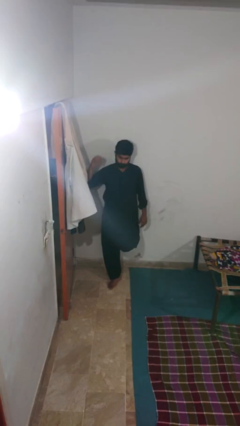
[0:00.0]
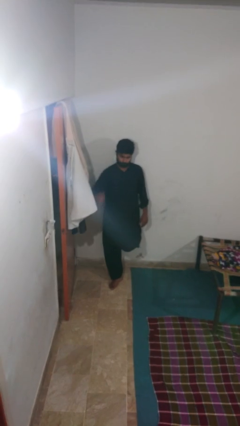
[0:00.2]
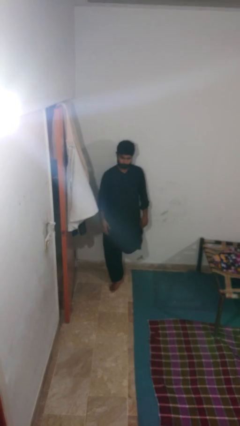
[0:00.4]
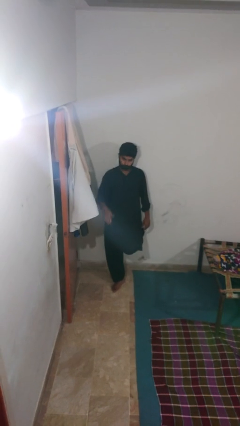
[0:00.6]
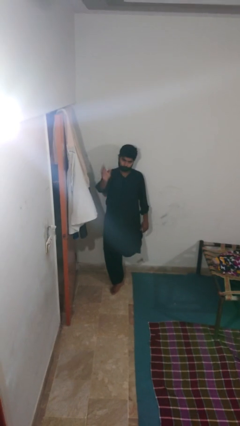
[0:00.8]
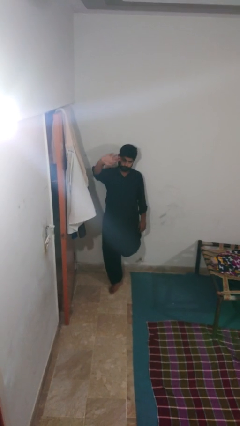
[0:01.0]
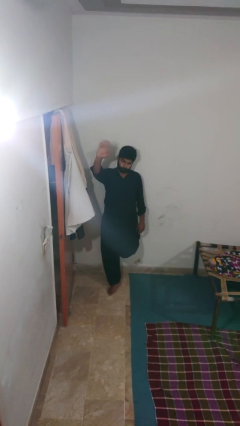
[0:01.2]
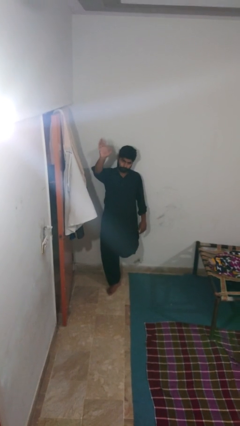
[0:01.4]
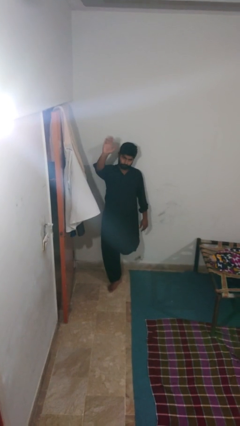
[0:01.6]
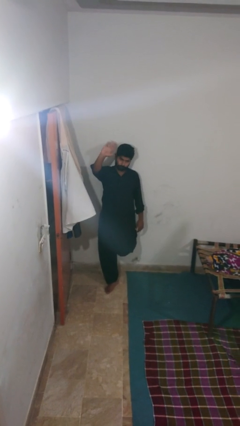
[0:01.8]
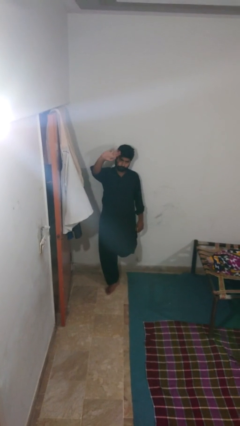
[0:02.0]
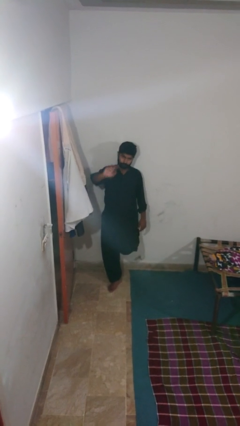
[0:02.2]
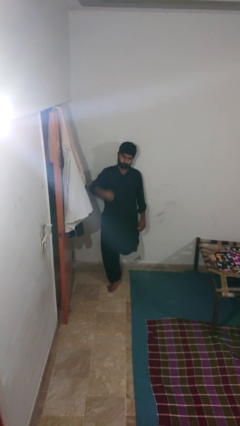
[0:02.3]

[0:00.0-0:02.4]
person waves at person

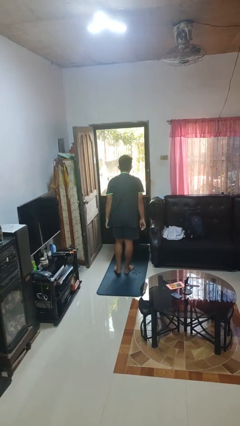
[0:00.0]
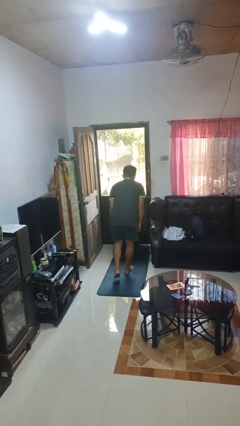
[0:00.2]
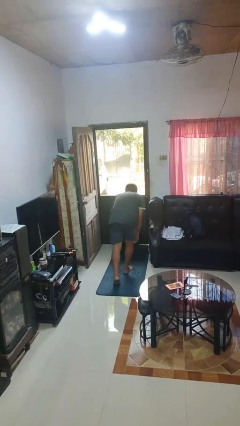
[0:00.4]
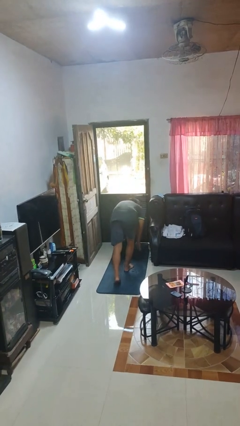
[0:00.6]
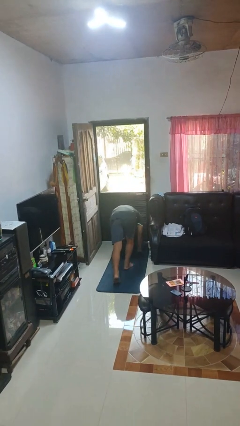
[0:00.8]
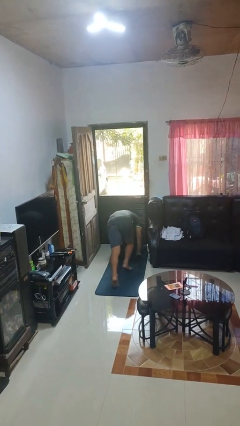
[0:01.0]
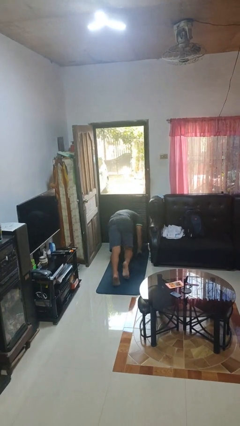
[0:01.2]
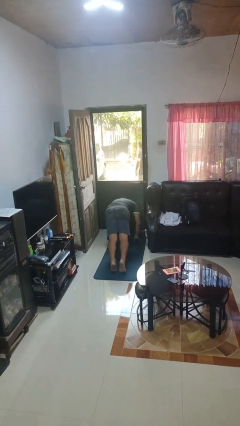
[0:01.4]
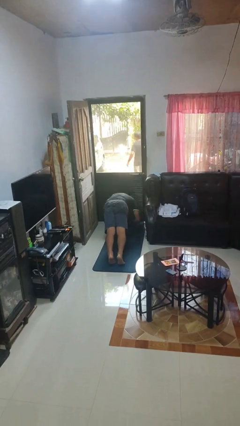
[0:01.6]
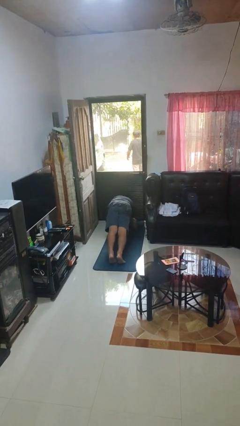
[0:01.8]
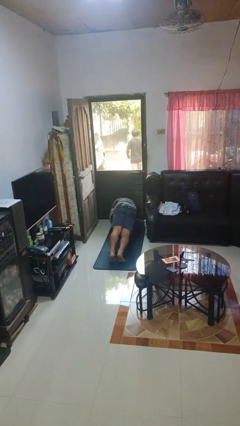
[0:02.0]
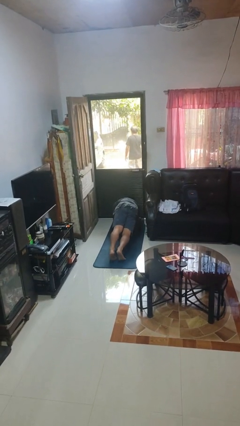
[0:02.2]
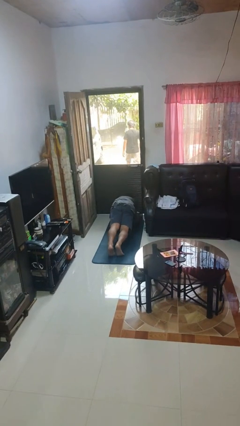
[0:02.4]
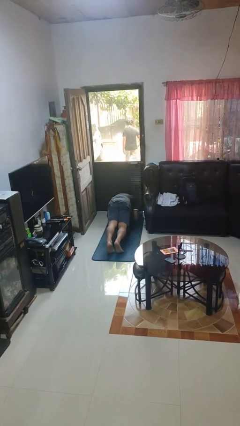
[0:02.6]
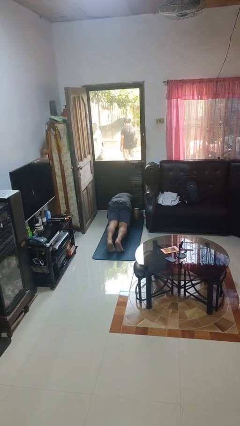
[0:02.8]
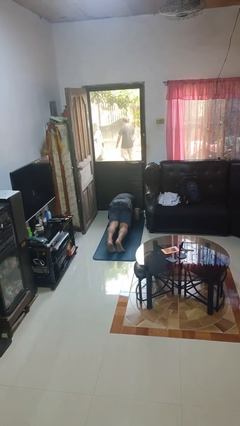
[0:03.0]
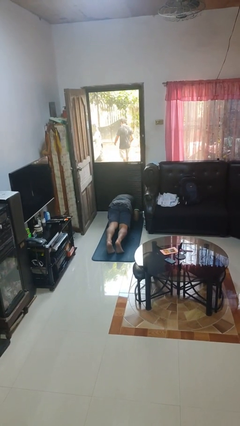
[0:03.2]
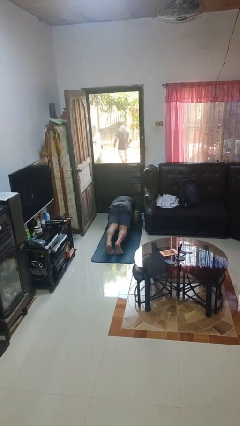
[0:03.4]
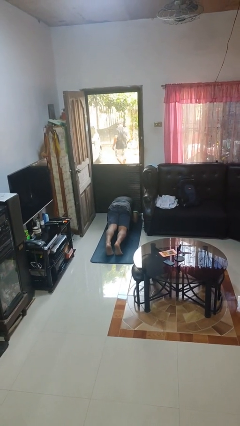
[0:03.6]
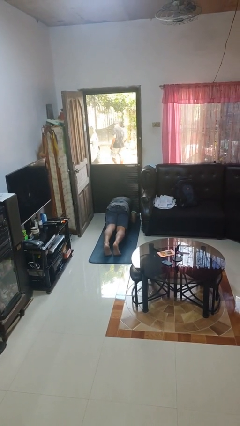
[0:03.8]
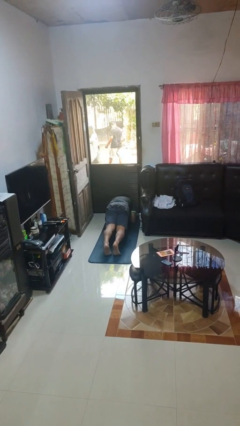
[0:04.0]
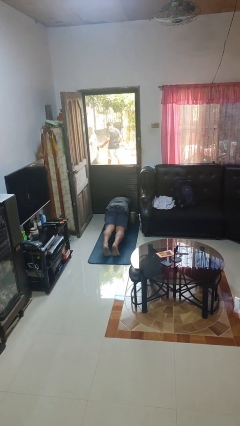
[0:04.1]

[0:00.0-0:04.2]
person exercises with plank

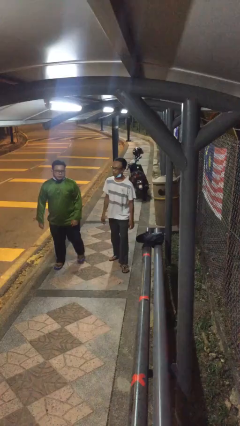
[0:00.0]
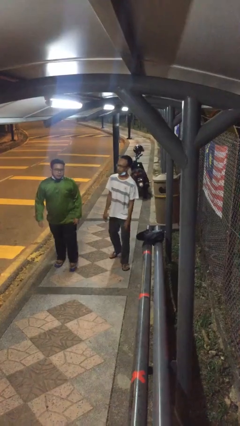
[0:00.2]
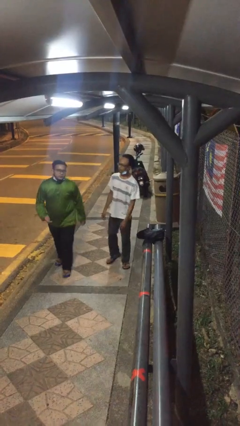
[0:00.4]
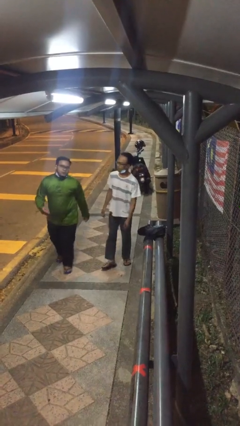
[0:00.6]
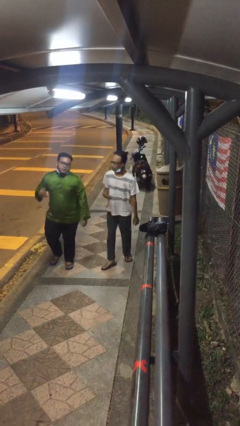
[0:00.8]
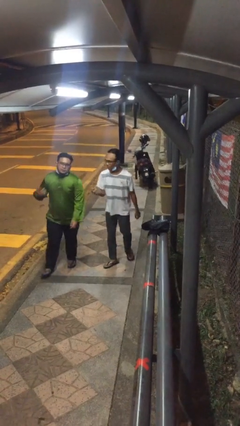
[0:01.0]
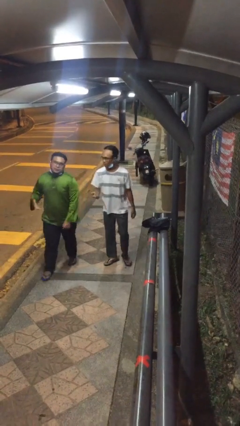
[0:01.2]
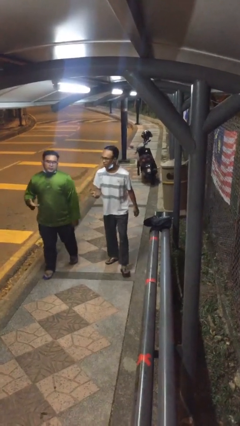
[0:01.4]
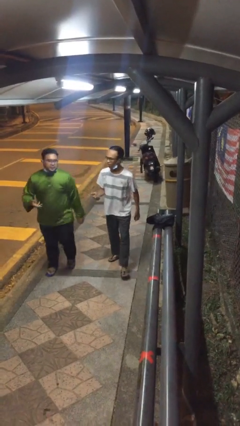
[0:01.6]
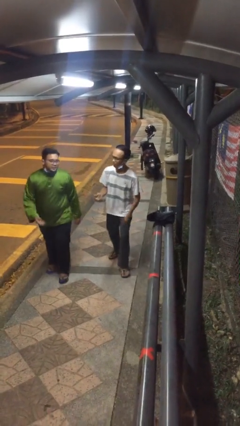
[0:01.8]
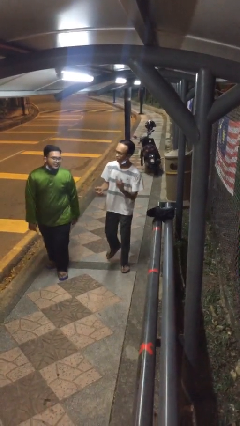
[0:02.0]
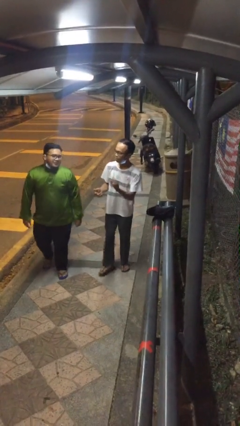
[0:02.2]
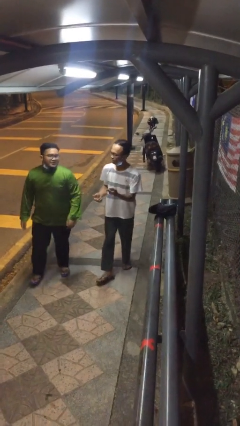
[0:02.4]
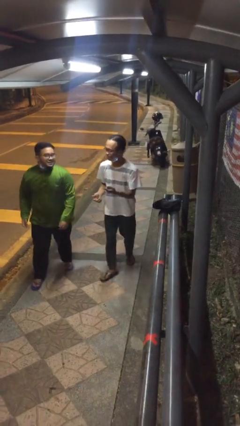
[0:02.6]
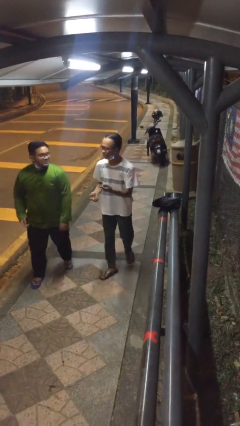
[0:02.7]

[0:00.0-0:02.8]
person talks to person

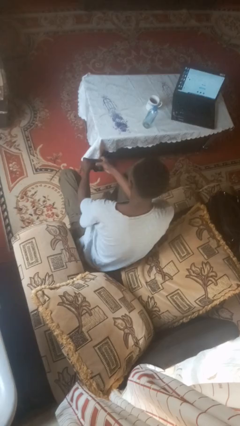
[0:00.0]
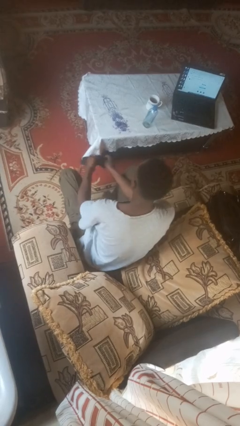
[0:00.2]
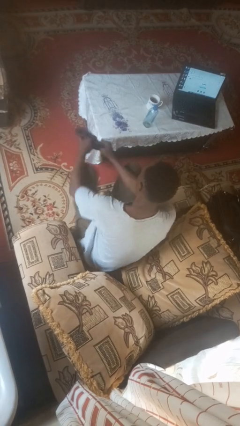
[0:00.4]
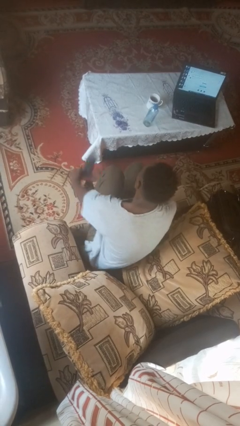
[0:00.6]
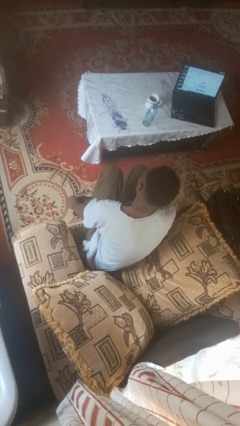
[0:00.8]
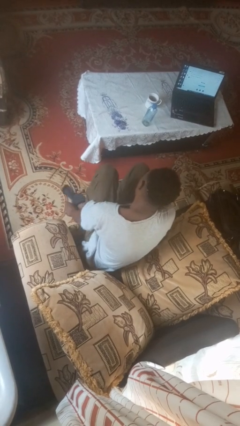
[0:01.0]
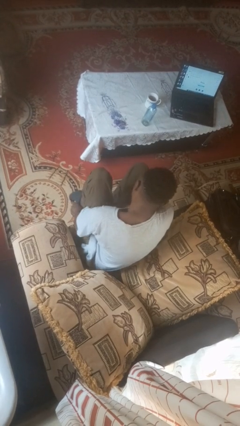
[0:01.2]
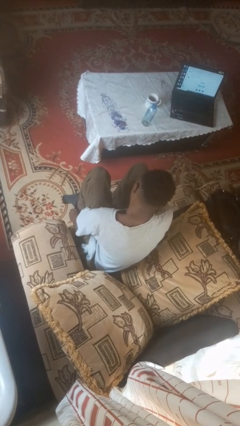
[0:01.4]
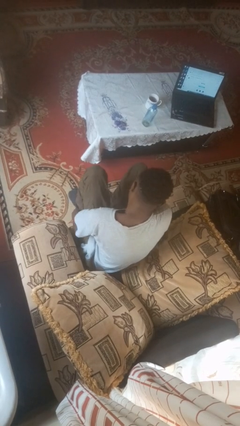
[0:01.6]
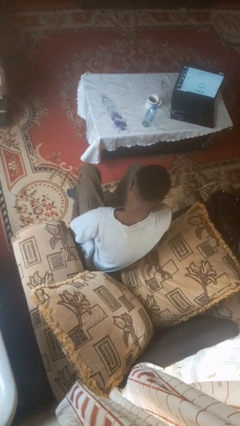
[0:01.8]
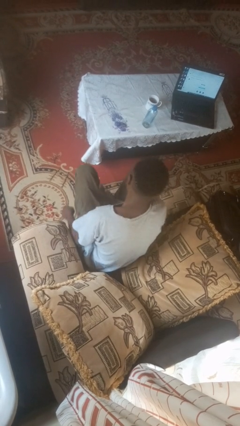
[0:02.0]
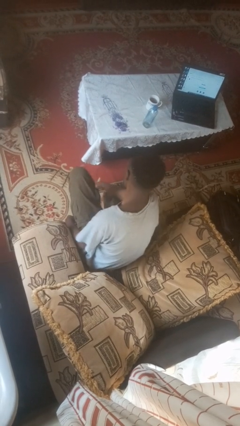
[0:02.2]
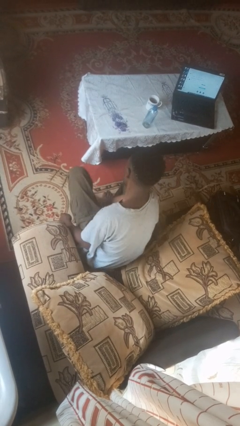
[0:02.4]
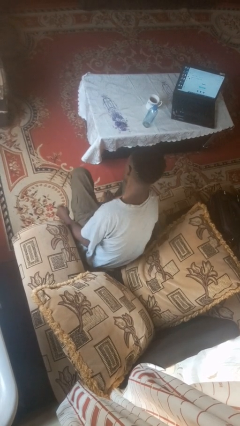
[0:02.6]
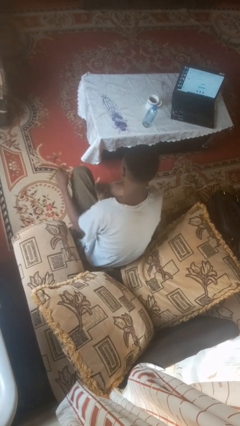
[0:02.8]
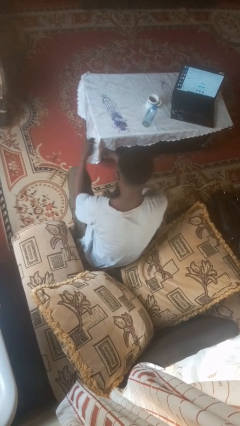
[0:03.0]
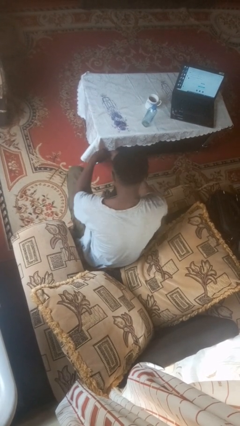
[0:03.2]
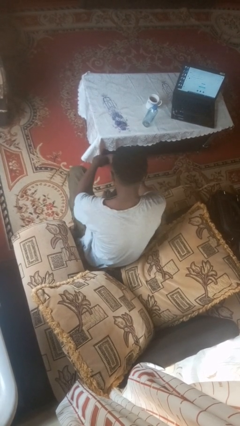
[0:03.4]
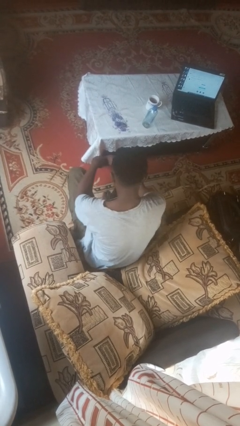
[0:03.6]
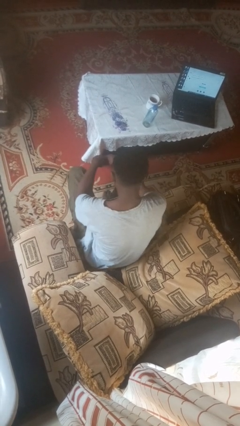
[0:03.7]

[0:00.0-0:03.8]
person puts on socks

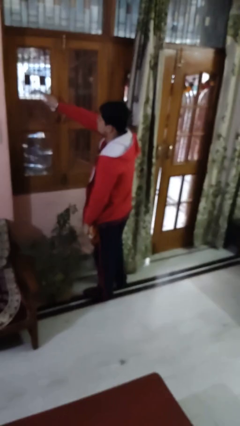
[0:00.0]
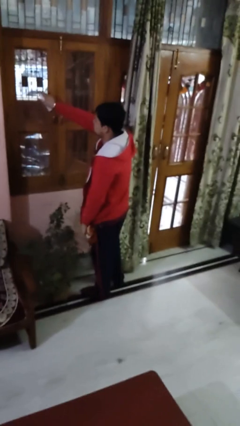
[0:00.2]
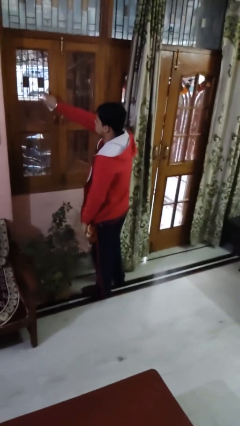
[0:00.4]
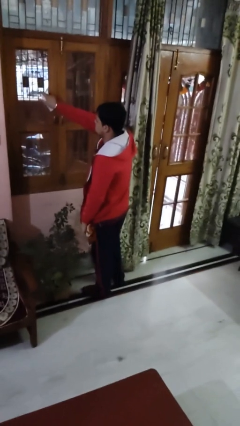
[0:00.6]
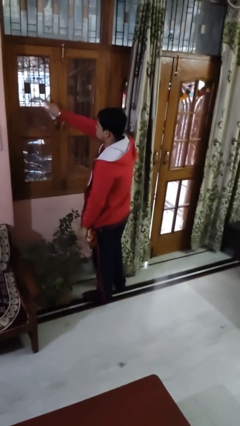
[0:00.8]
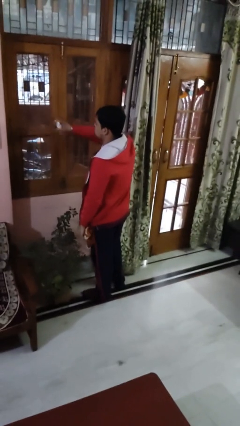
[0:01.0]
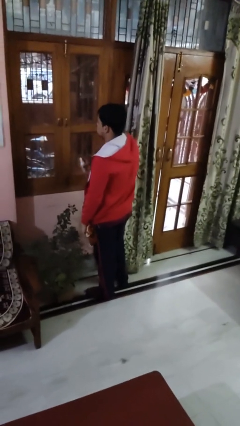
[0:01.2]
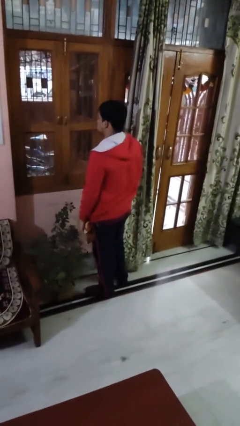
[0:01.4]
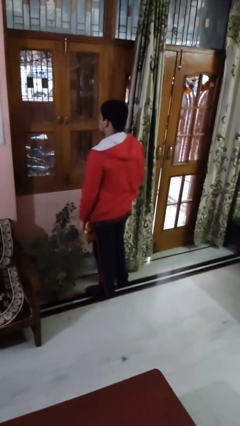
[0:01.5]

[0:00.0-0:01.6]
person sprays from bottle

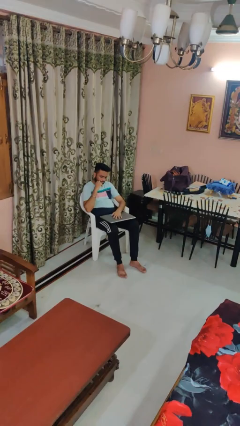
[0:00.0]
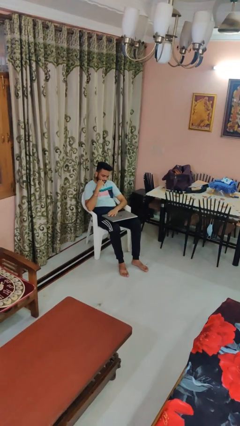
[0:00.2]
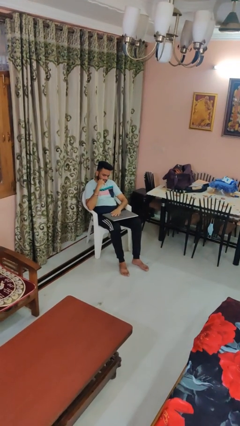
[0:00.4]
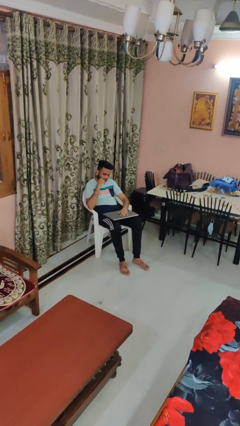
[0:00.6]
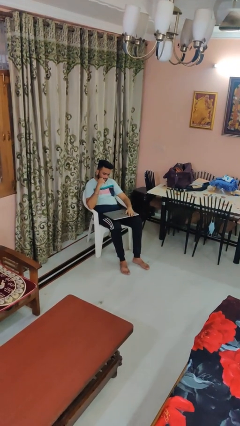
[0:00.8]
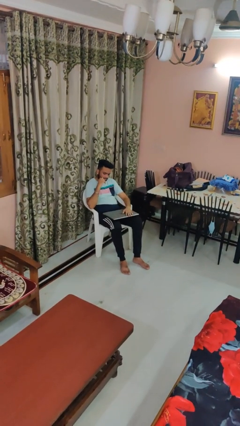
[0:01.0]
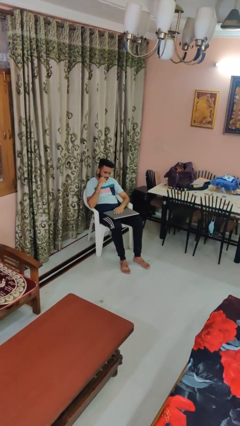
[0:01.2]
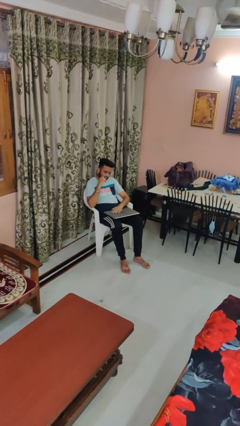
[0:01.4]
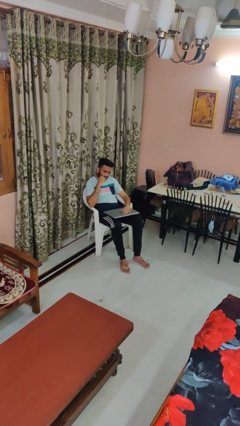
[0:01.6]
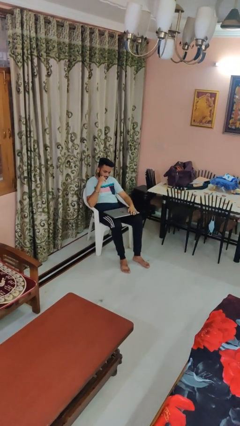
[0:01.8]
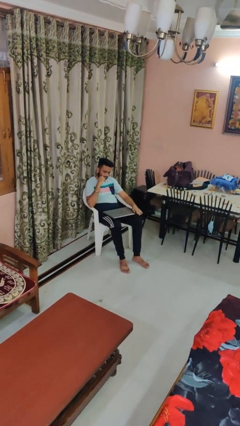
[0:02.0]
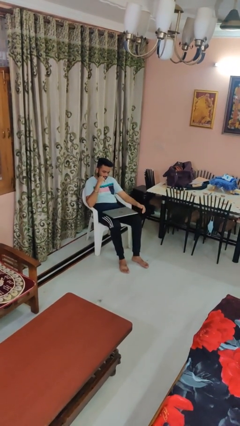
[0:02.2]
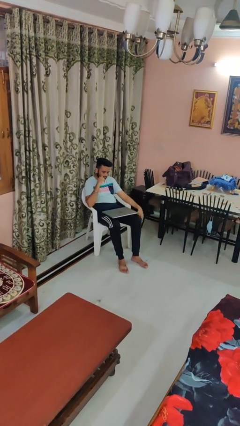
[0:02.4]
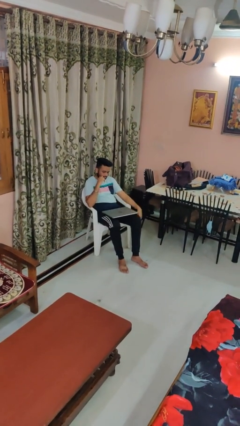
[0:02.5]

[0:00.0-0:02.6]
person waves hand over object
